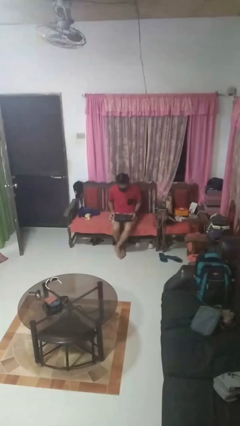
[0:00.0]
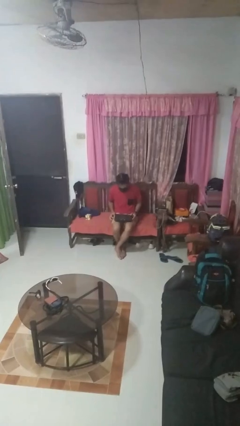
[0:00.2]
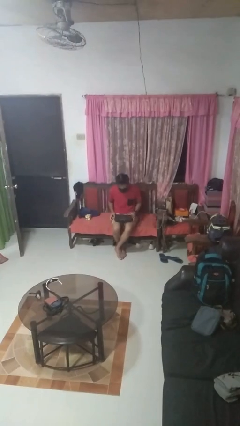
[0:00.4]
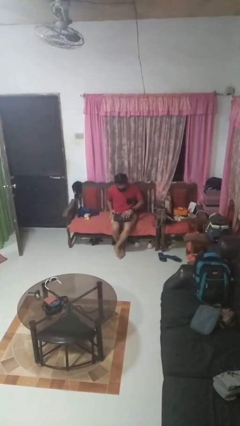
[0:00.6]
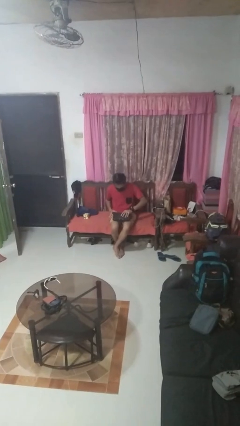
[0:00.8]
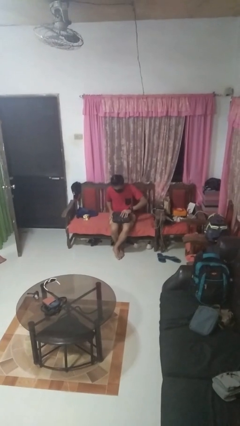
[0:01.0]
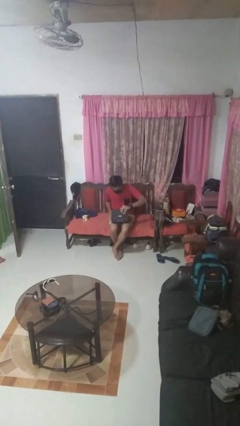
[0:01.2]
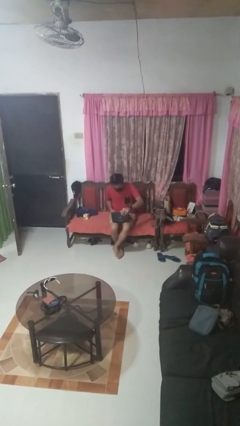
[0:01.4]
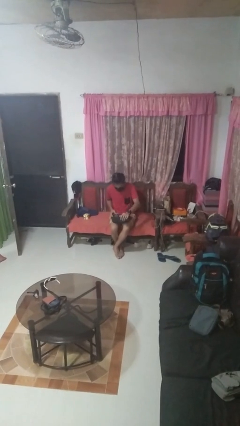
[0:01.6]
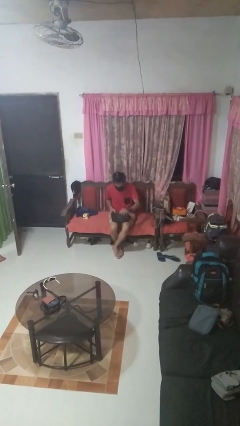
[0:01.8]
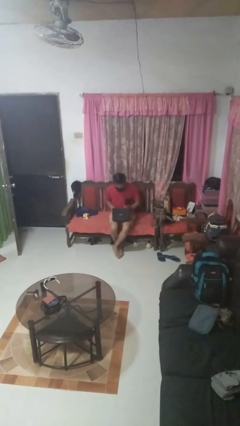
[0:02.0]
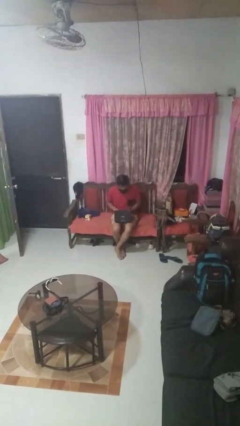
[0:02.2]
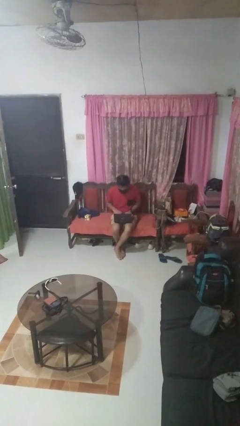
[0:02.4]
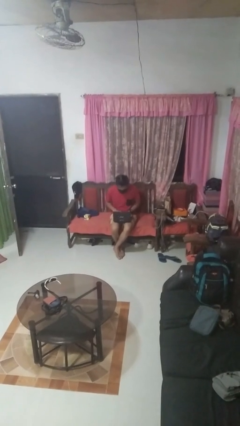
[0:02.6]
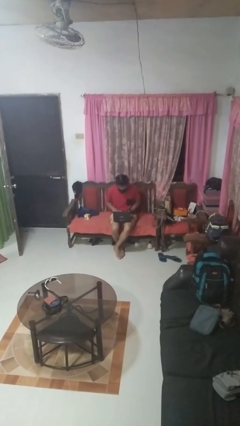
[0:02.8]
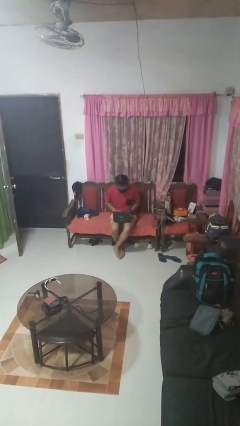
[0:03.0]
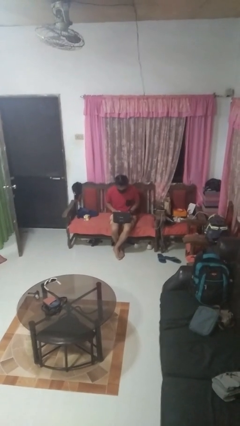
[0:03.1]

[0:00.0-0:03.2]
person opens laptop

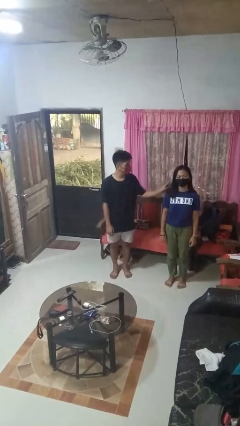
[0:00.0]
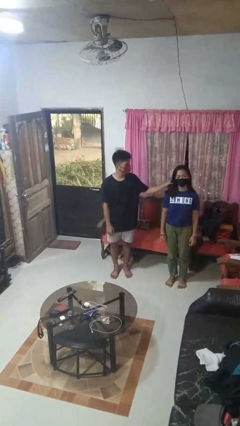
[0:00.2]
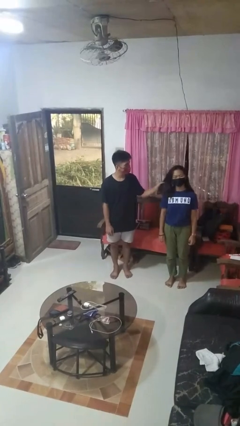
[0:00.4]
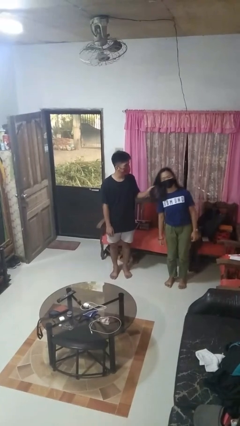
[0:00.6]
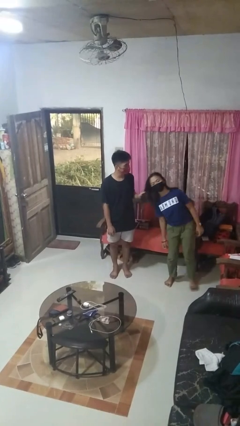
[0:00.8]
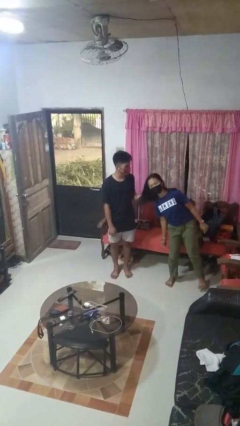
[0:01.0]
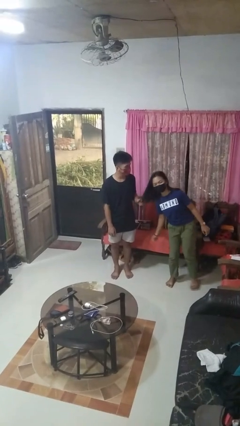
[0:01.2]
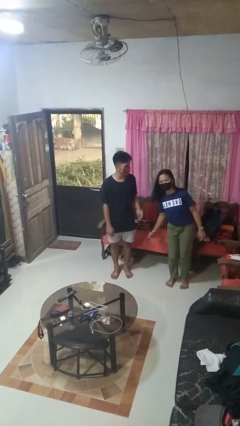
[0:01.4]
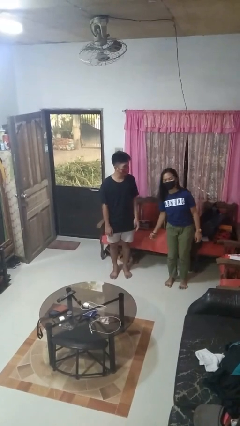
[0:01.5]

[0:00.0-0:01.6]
person grabs person by hair

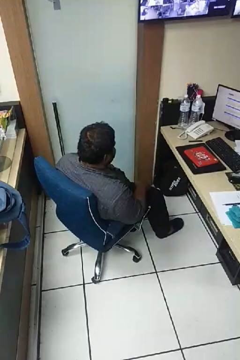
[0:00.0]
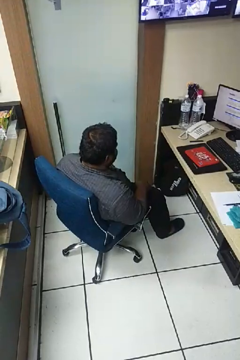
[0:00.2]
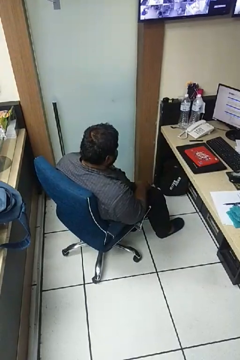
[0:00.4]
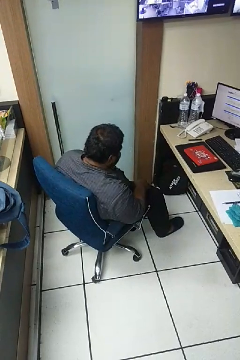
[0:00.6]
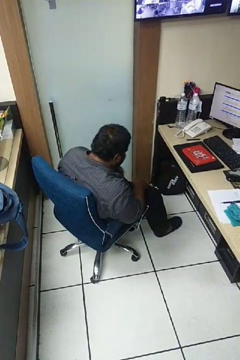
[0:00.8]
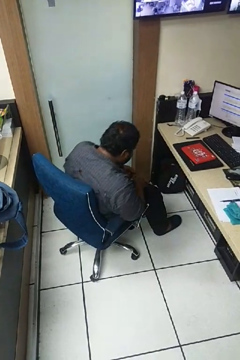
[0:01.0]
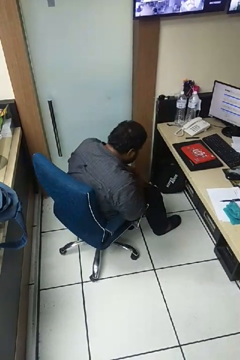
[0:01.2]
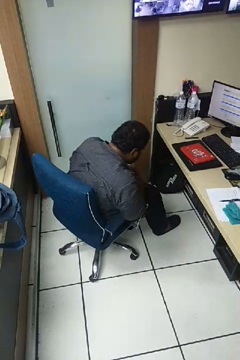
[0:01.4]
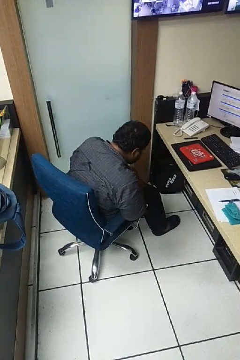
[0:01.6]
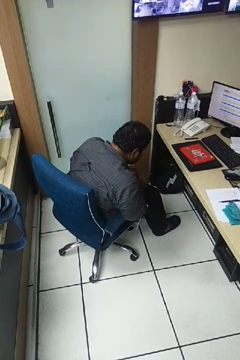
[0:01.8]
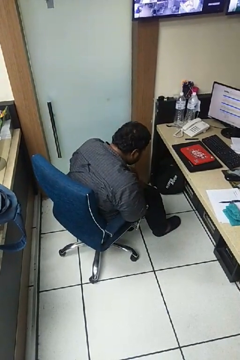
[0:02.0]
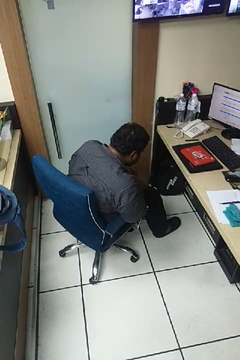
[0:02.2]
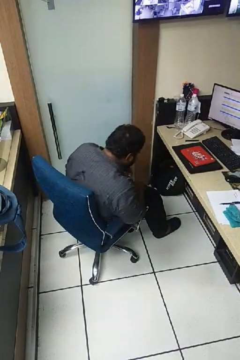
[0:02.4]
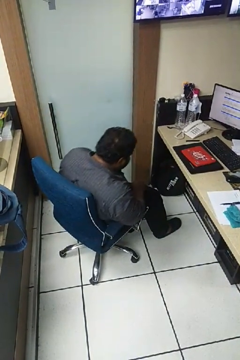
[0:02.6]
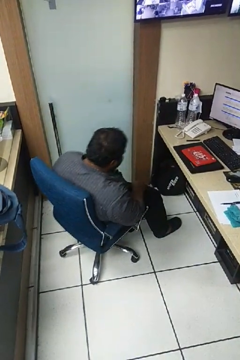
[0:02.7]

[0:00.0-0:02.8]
person looks at hands in lap

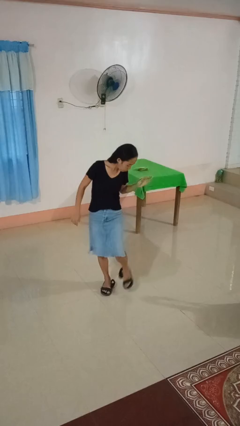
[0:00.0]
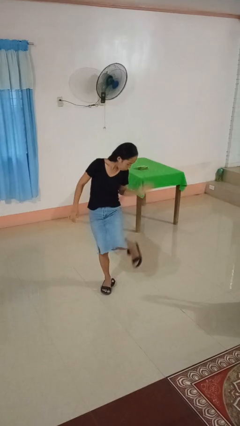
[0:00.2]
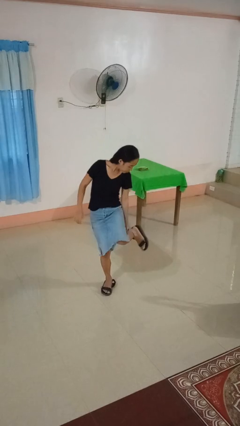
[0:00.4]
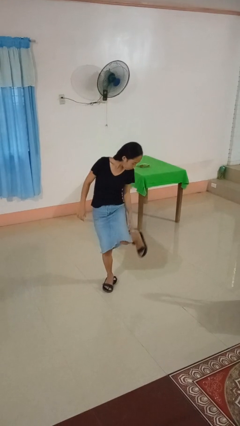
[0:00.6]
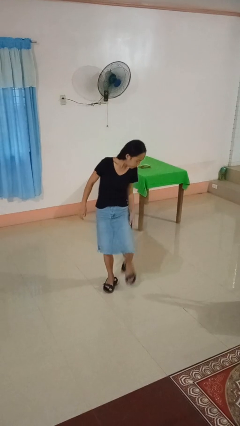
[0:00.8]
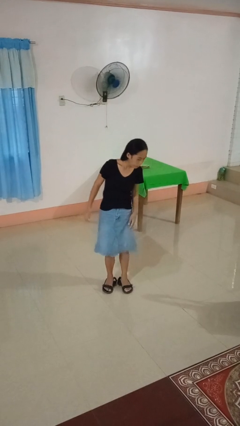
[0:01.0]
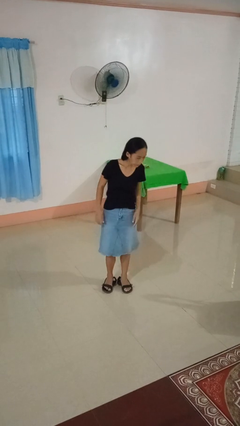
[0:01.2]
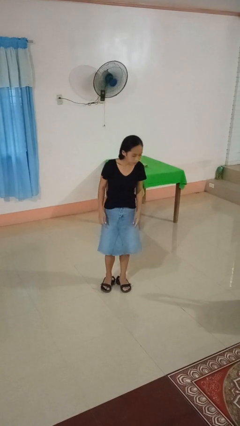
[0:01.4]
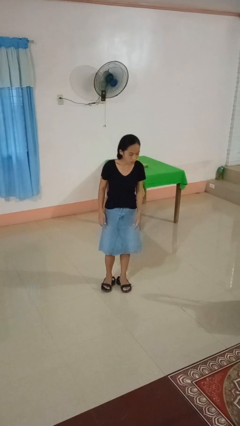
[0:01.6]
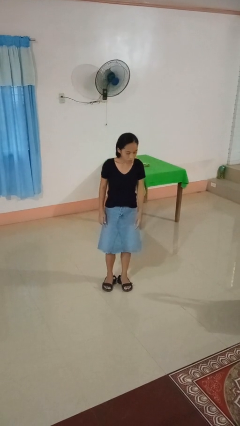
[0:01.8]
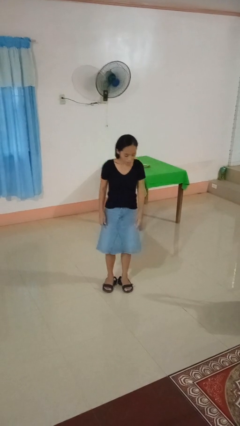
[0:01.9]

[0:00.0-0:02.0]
person swats bug

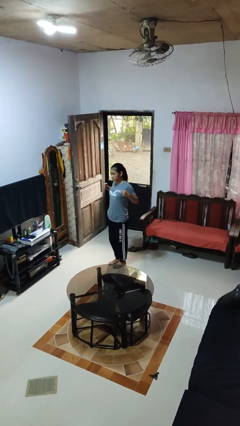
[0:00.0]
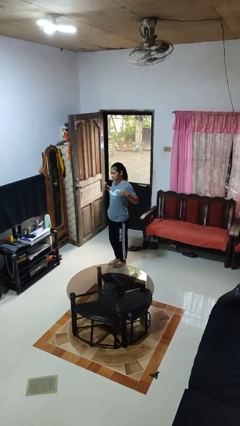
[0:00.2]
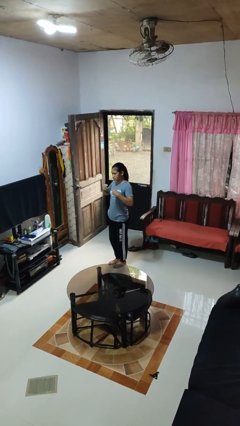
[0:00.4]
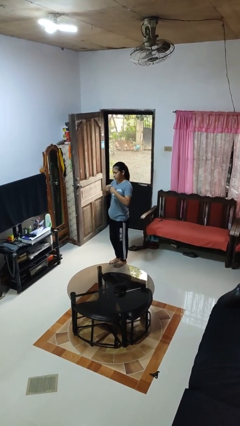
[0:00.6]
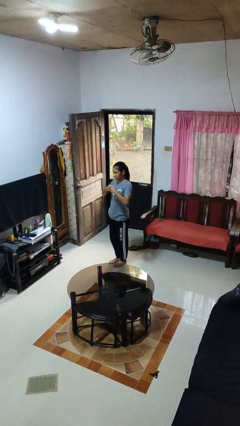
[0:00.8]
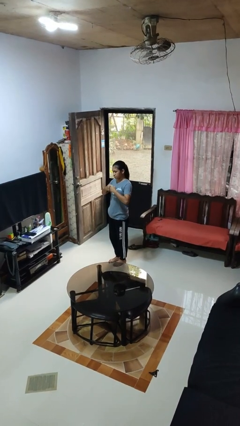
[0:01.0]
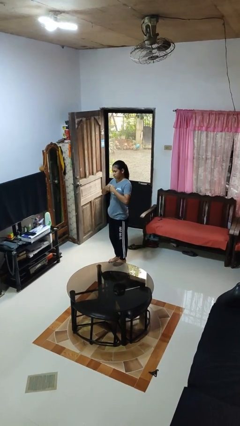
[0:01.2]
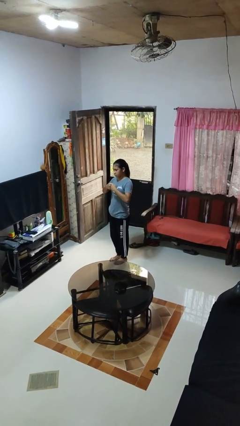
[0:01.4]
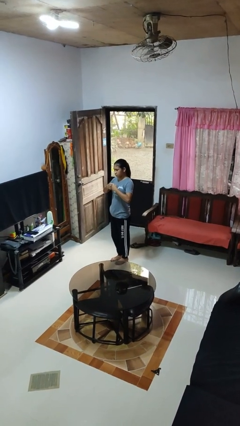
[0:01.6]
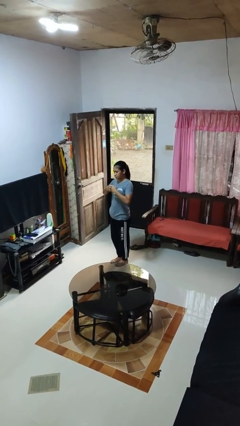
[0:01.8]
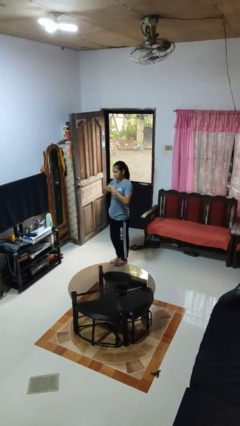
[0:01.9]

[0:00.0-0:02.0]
person gestures zoom out

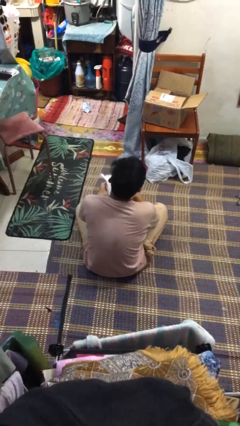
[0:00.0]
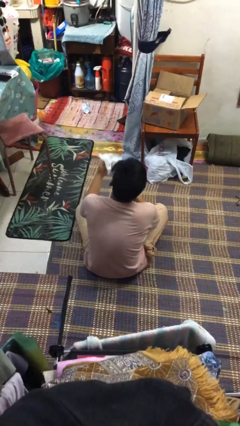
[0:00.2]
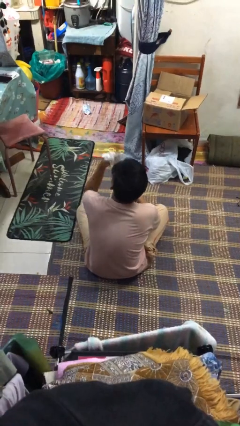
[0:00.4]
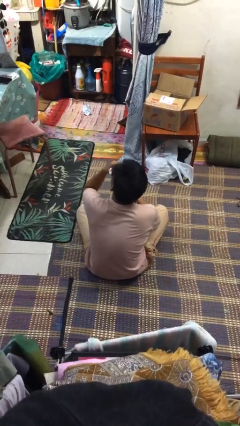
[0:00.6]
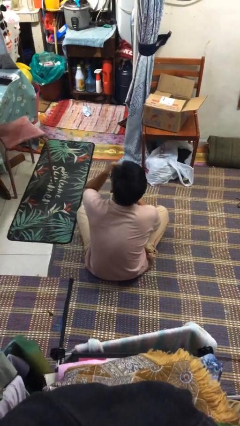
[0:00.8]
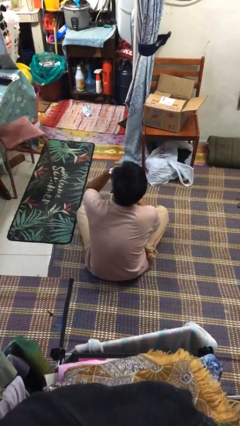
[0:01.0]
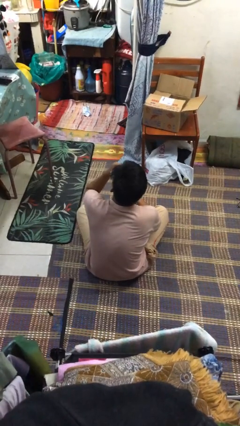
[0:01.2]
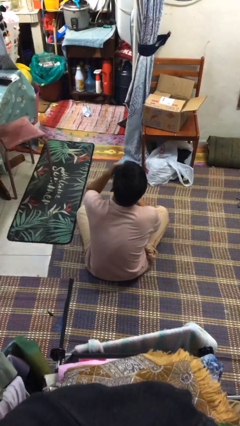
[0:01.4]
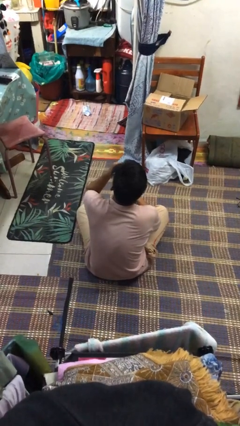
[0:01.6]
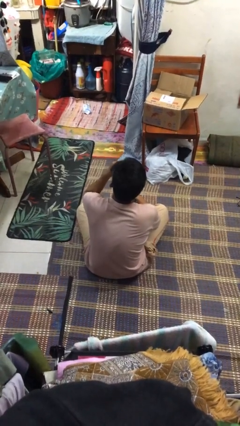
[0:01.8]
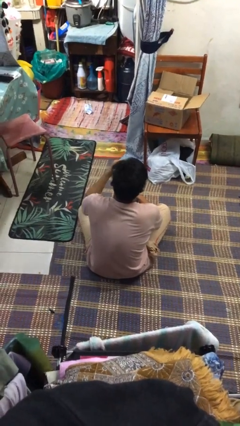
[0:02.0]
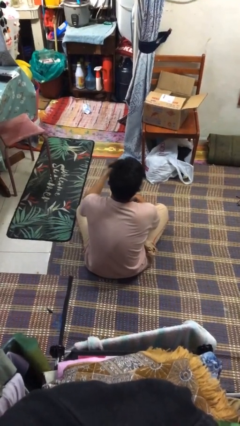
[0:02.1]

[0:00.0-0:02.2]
person blows nose

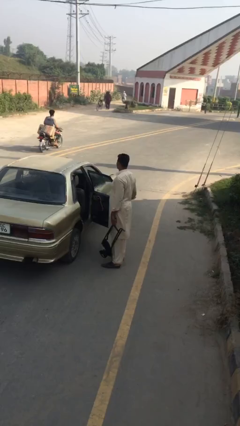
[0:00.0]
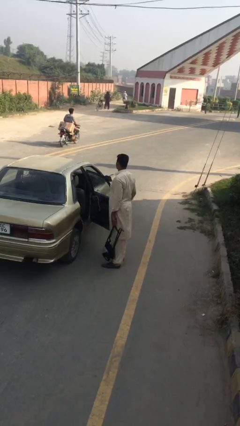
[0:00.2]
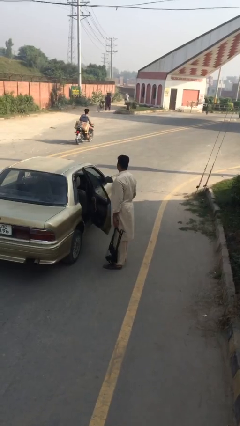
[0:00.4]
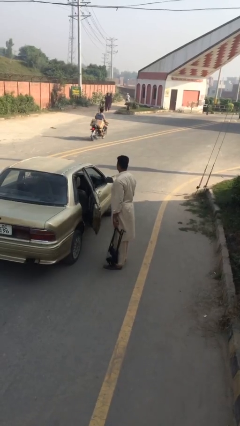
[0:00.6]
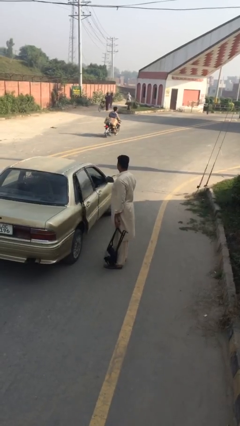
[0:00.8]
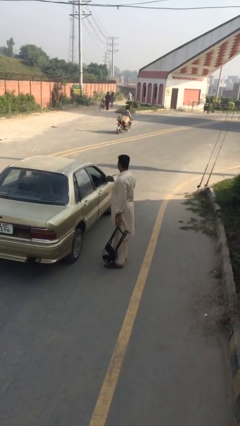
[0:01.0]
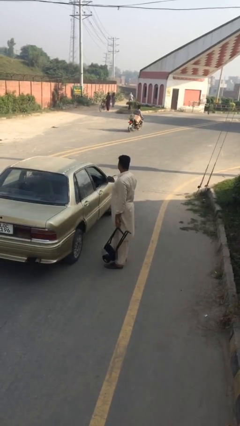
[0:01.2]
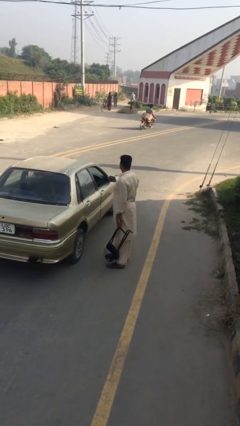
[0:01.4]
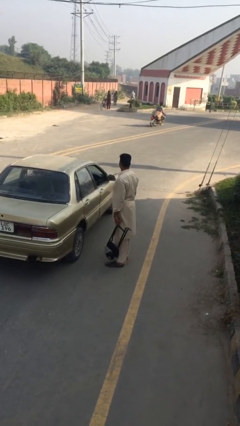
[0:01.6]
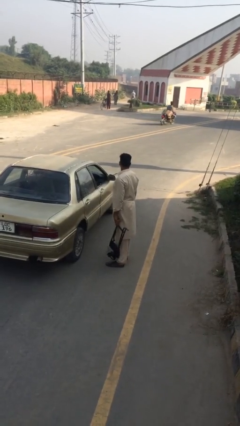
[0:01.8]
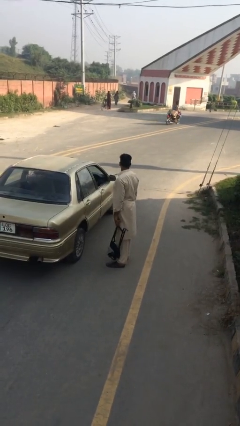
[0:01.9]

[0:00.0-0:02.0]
person closes car door

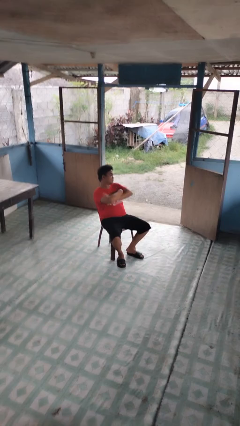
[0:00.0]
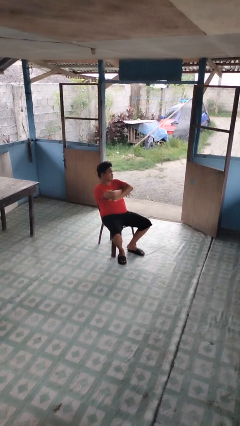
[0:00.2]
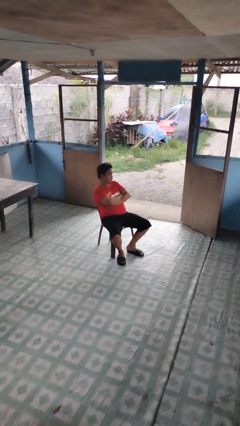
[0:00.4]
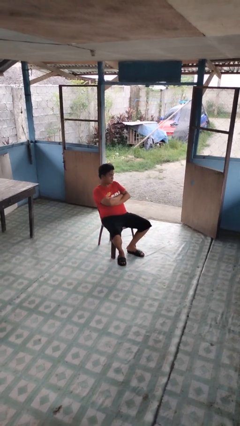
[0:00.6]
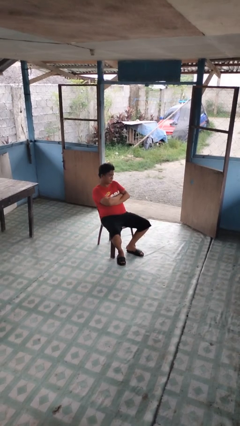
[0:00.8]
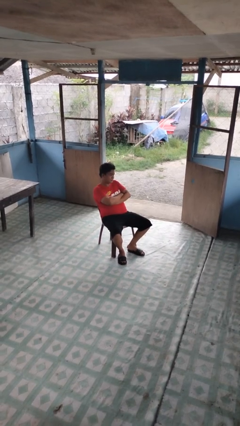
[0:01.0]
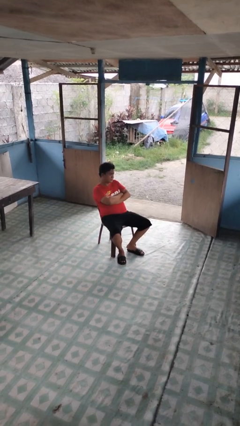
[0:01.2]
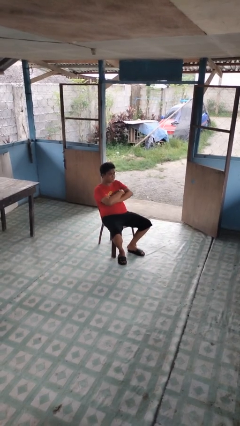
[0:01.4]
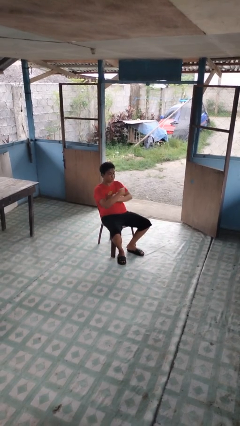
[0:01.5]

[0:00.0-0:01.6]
person crosses arms
